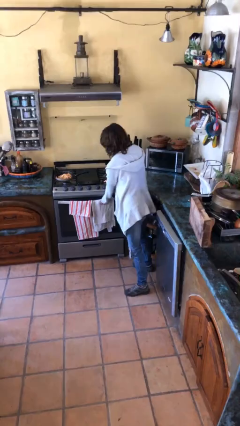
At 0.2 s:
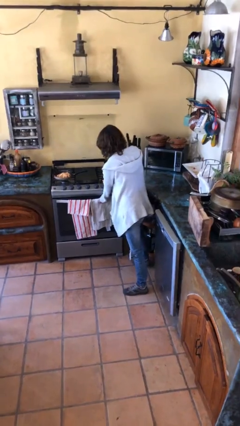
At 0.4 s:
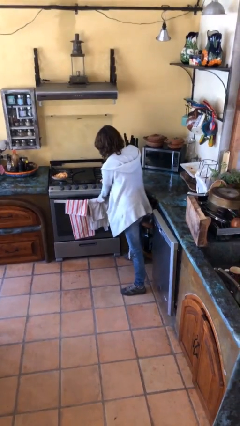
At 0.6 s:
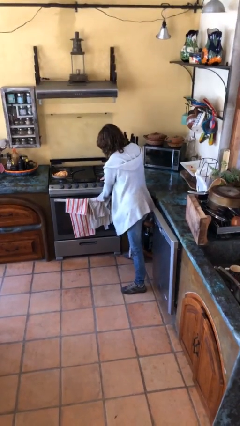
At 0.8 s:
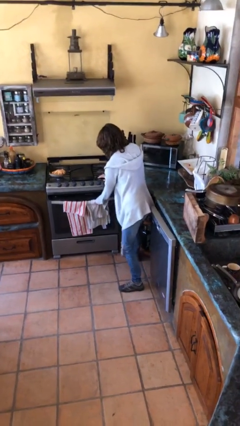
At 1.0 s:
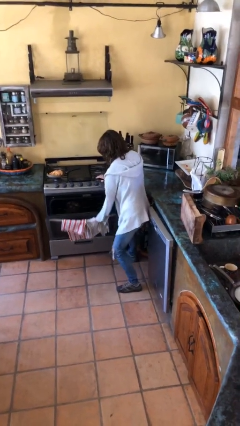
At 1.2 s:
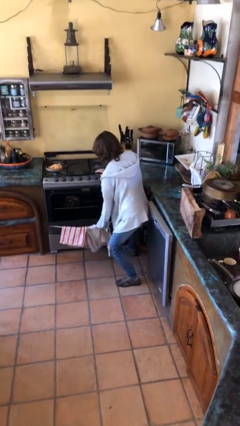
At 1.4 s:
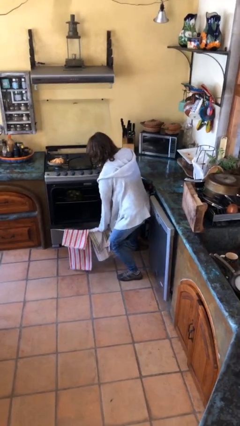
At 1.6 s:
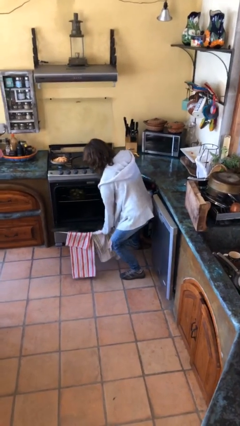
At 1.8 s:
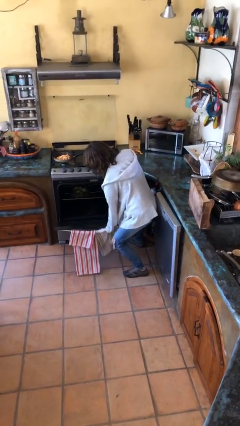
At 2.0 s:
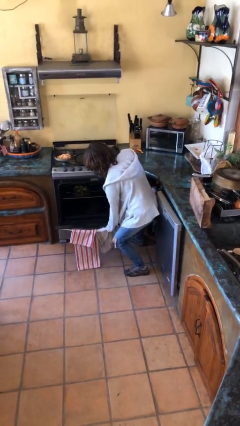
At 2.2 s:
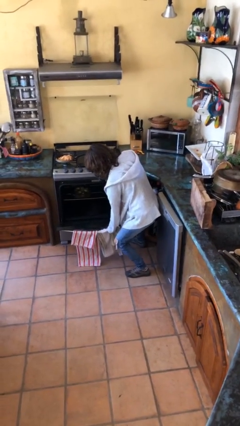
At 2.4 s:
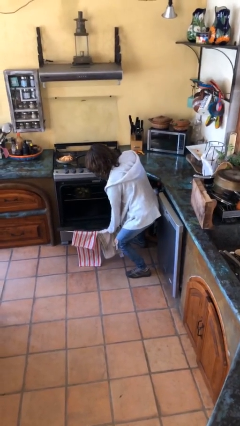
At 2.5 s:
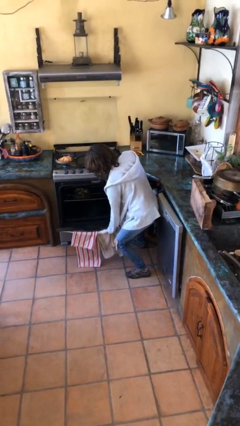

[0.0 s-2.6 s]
person opens oven door

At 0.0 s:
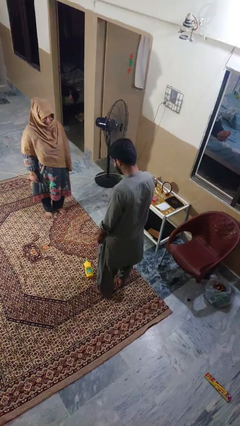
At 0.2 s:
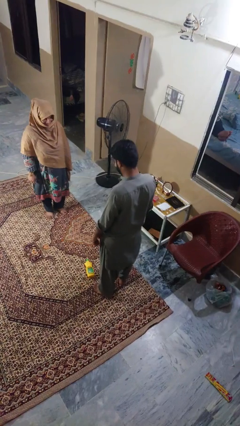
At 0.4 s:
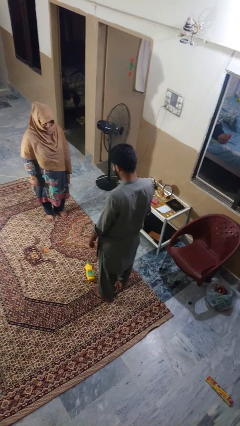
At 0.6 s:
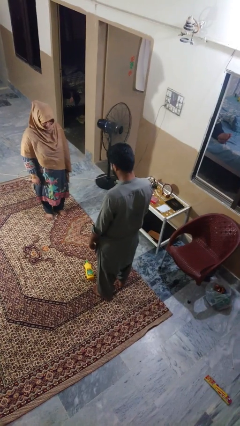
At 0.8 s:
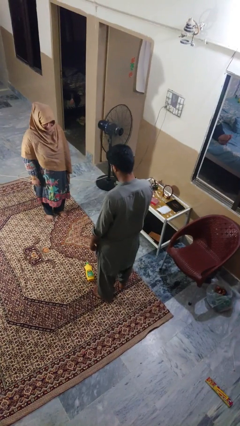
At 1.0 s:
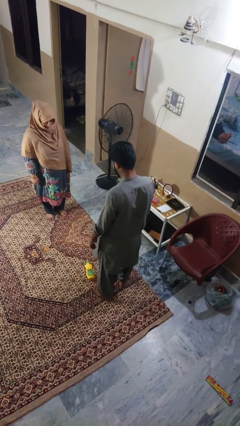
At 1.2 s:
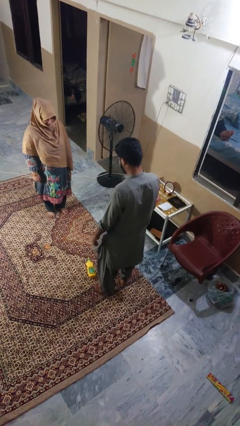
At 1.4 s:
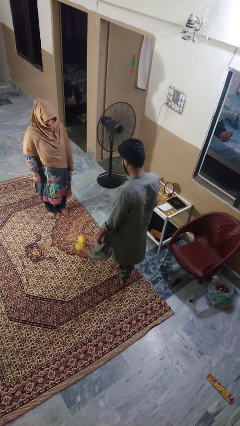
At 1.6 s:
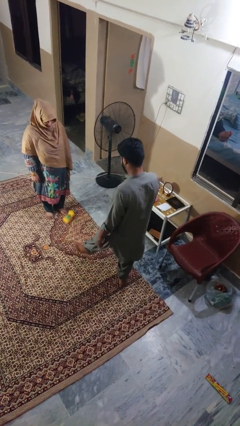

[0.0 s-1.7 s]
person kicks object to person

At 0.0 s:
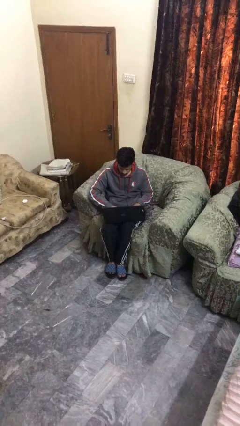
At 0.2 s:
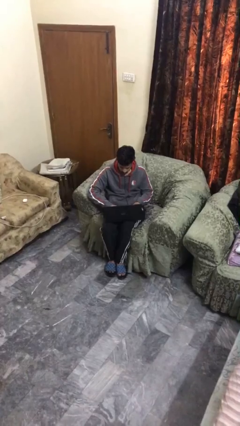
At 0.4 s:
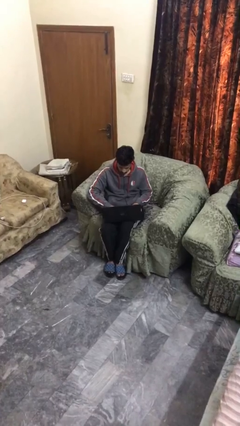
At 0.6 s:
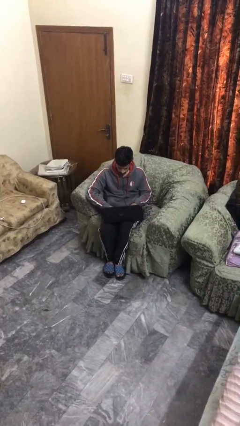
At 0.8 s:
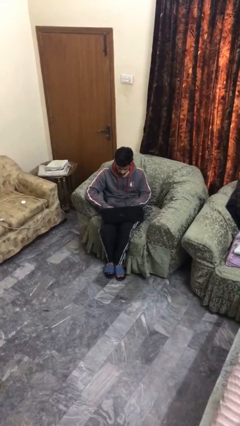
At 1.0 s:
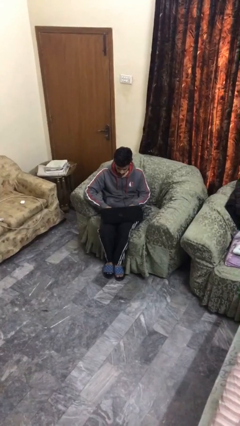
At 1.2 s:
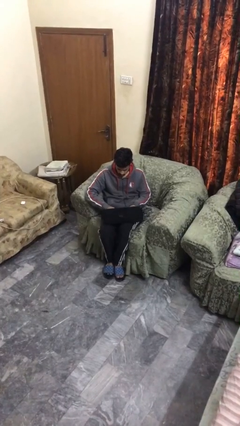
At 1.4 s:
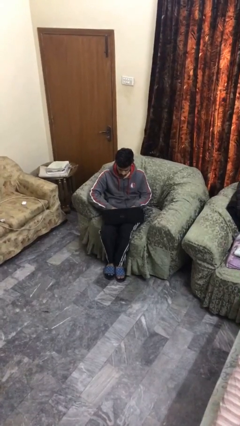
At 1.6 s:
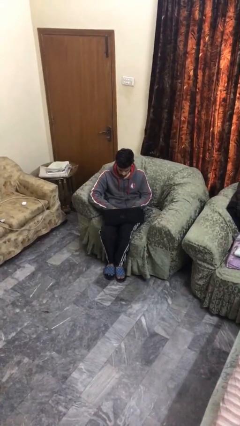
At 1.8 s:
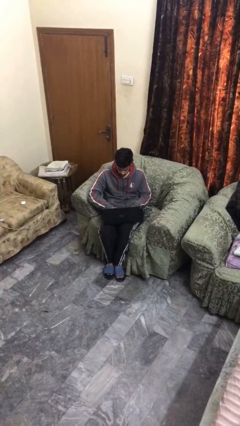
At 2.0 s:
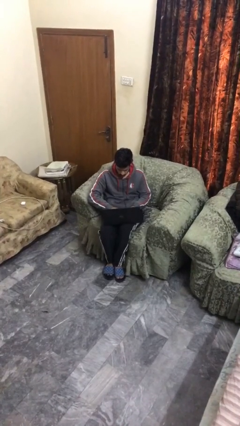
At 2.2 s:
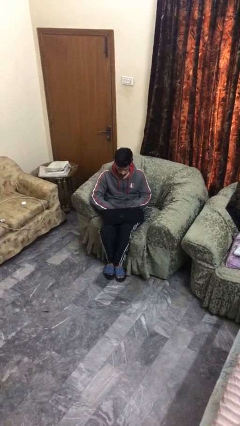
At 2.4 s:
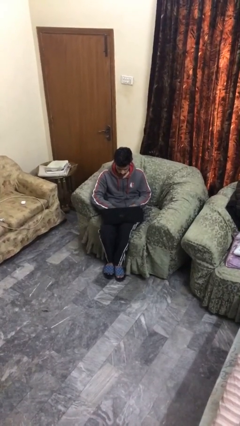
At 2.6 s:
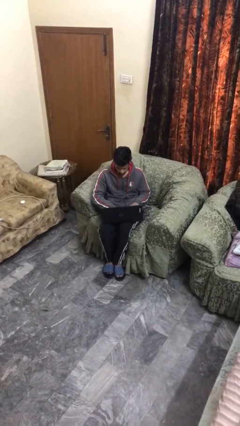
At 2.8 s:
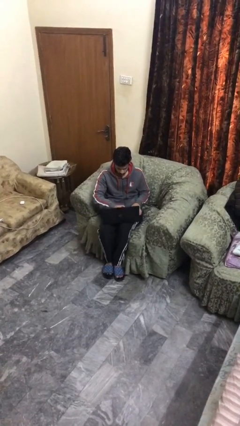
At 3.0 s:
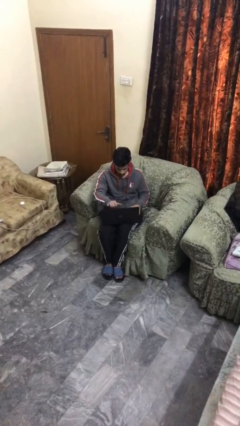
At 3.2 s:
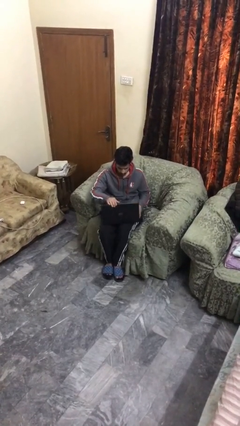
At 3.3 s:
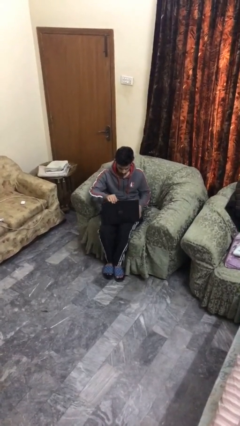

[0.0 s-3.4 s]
person interacts with laptop

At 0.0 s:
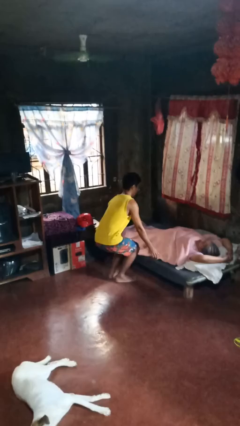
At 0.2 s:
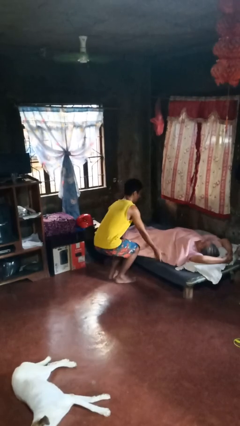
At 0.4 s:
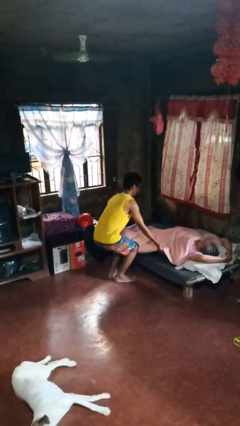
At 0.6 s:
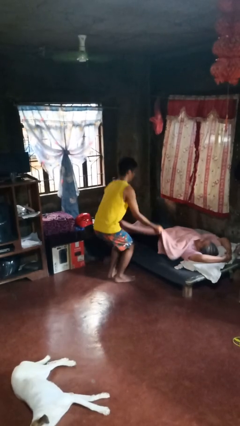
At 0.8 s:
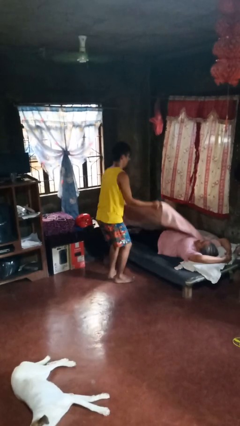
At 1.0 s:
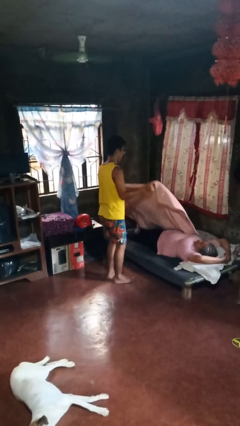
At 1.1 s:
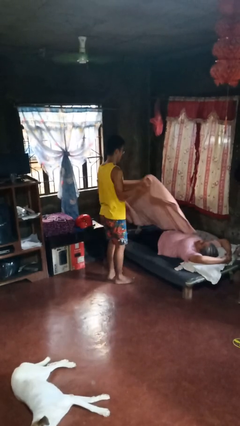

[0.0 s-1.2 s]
person uncovers friend with blanket

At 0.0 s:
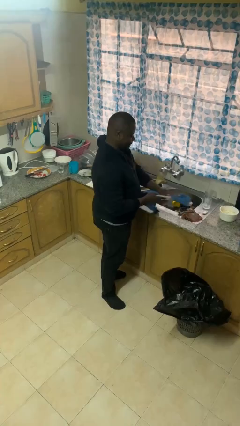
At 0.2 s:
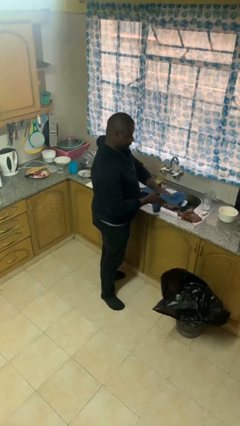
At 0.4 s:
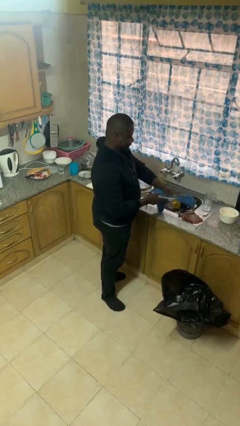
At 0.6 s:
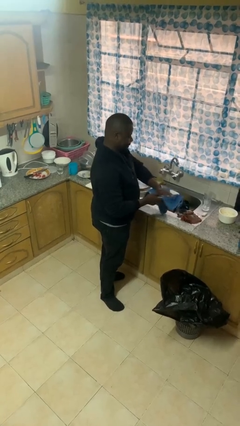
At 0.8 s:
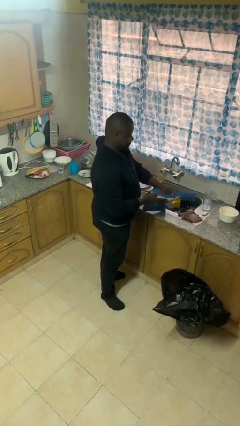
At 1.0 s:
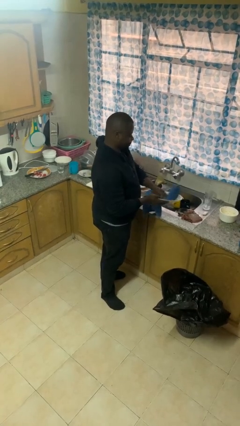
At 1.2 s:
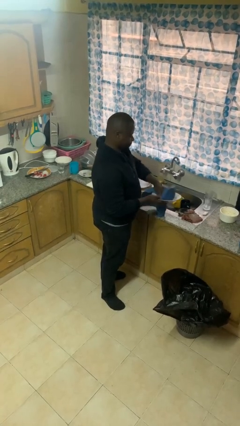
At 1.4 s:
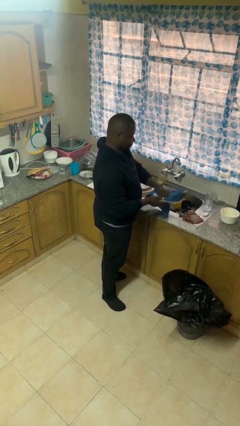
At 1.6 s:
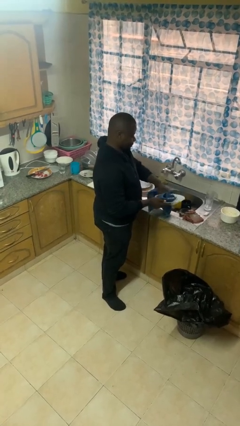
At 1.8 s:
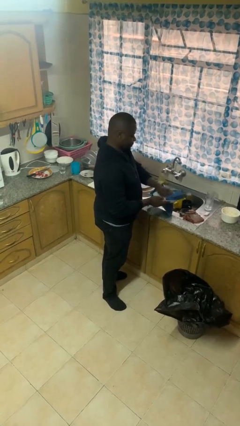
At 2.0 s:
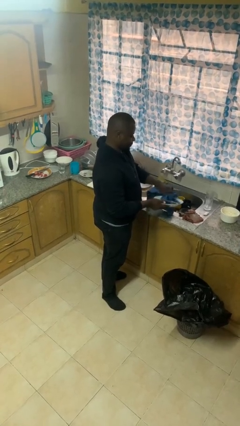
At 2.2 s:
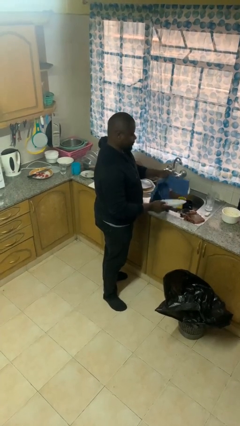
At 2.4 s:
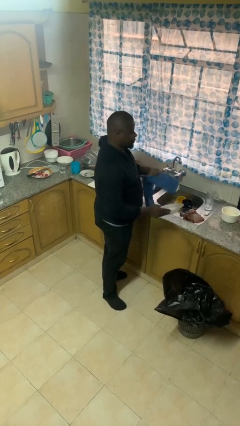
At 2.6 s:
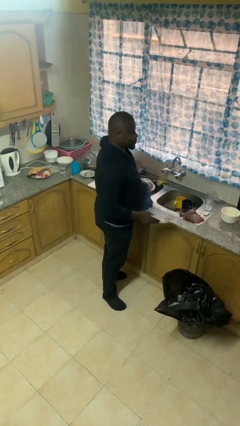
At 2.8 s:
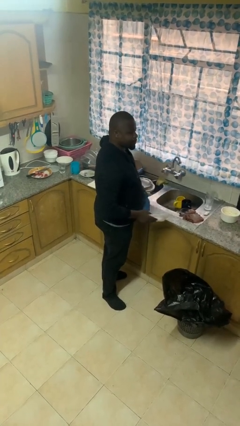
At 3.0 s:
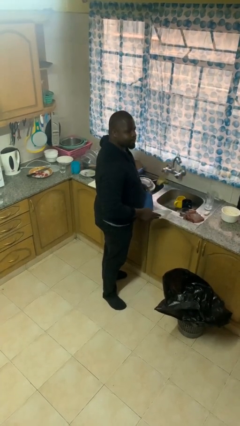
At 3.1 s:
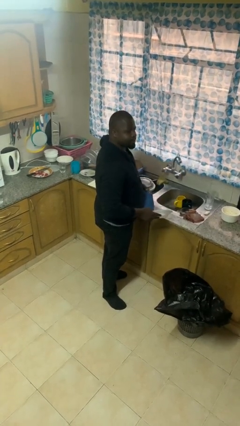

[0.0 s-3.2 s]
person dries dish

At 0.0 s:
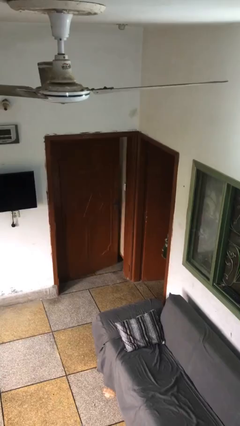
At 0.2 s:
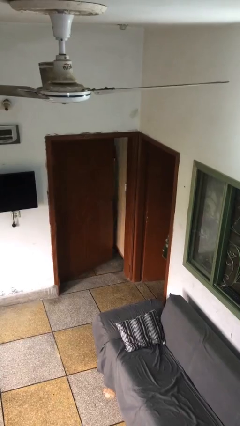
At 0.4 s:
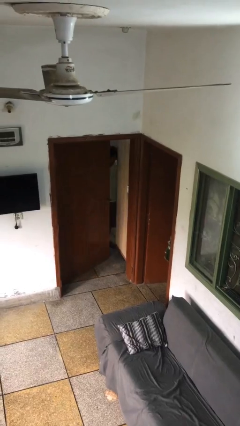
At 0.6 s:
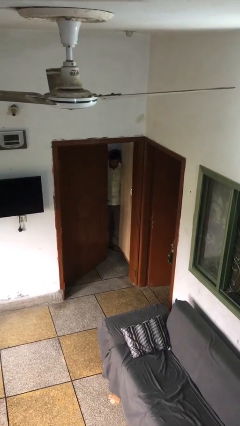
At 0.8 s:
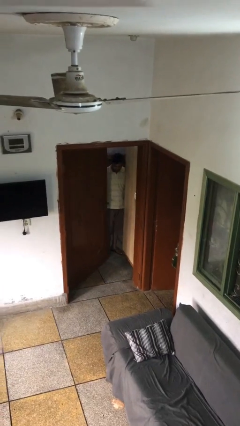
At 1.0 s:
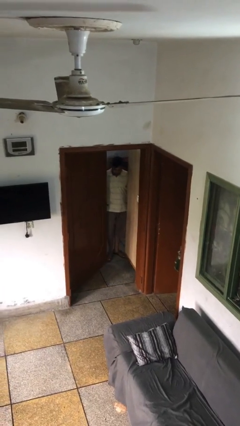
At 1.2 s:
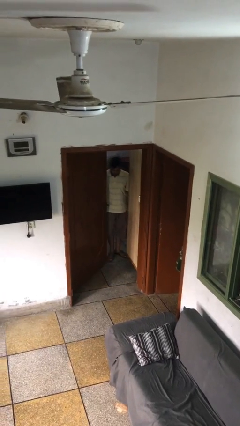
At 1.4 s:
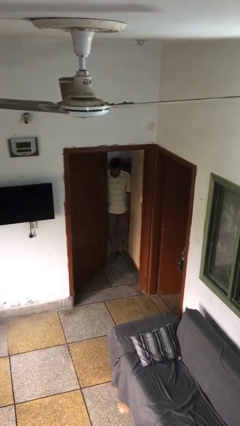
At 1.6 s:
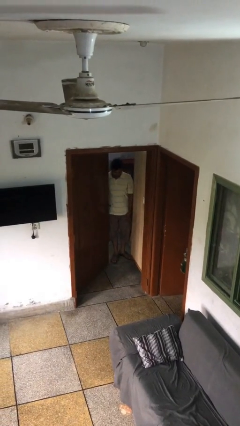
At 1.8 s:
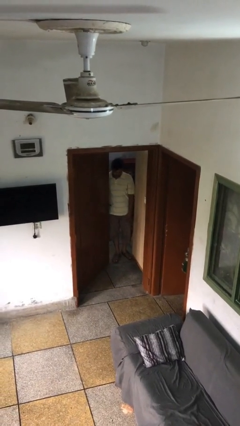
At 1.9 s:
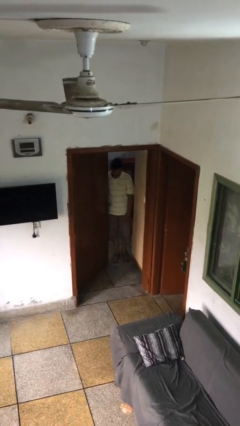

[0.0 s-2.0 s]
person opens facility door

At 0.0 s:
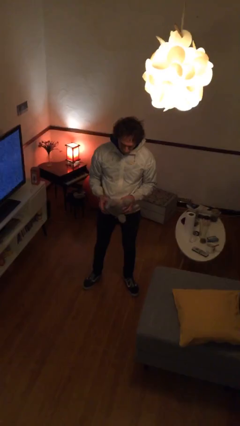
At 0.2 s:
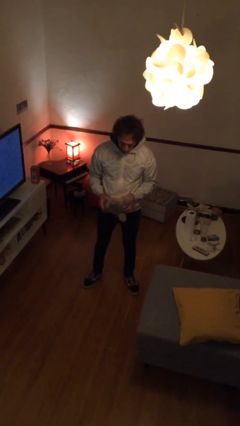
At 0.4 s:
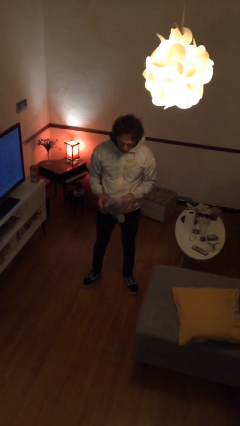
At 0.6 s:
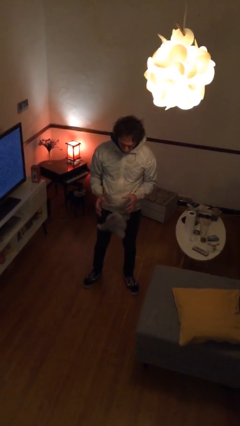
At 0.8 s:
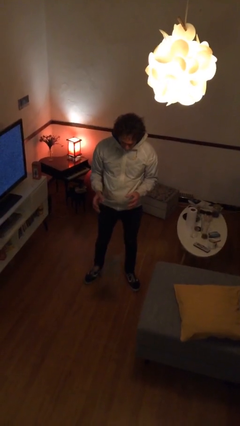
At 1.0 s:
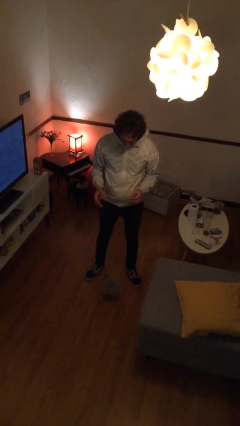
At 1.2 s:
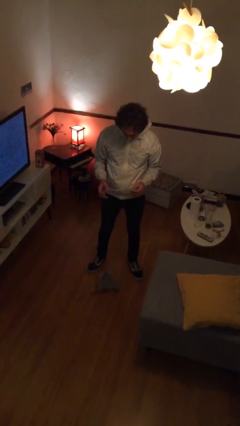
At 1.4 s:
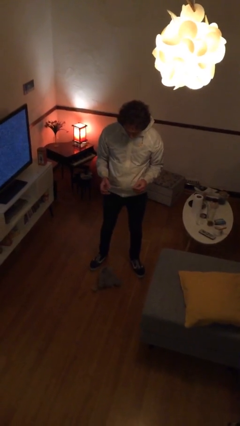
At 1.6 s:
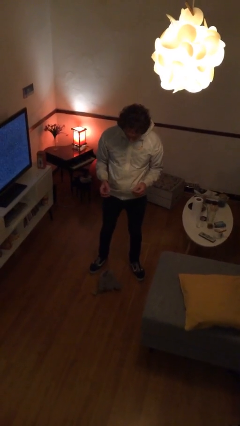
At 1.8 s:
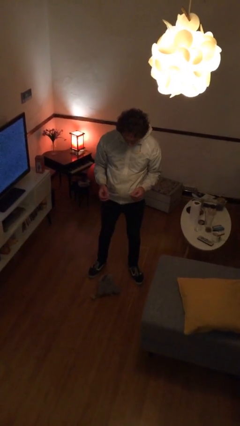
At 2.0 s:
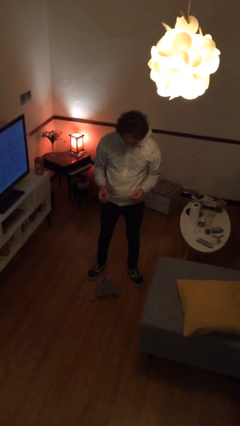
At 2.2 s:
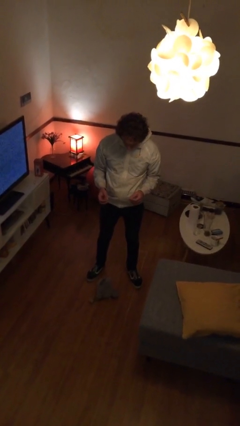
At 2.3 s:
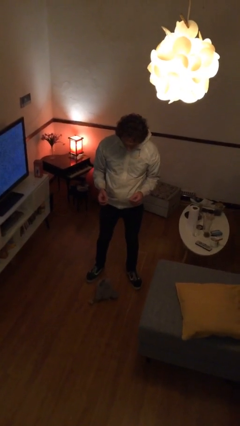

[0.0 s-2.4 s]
person drops object
